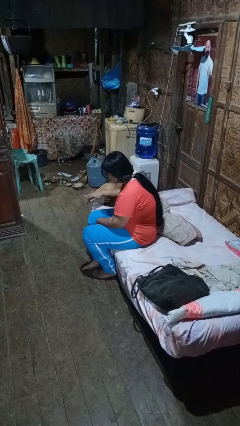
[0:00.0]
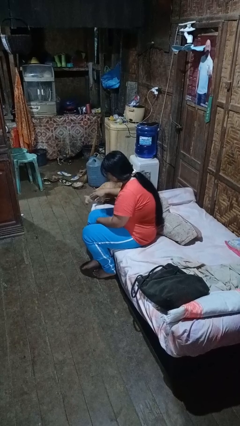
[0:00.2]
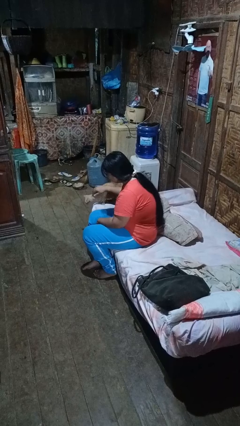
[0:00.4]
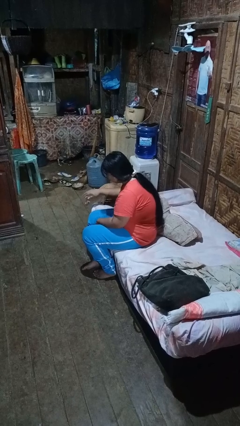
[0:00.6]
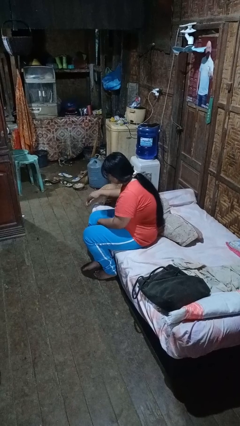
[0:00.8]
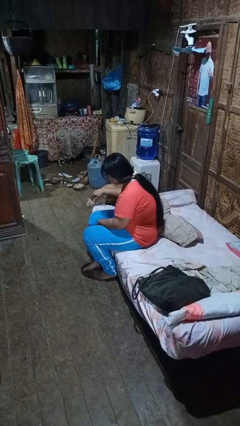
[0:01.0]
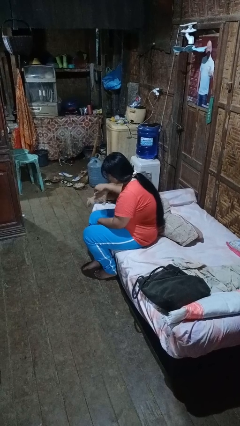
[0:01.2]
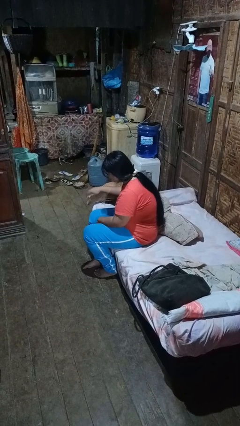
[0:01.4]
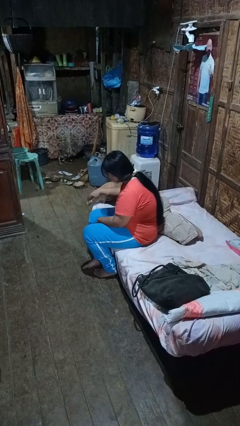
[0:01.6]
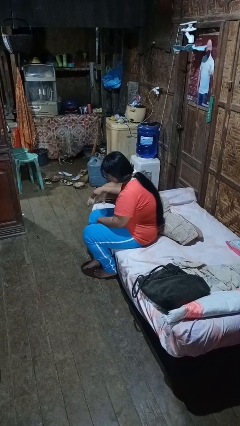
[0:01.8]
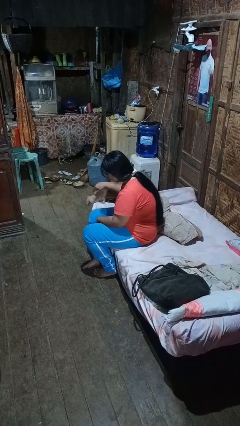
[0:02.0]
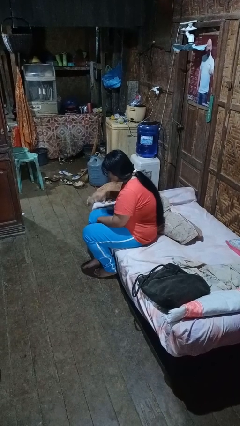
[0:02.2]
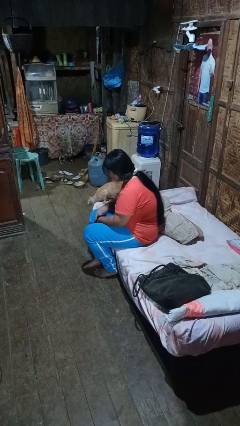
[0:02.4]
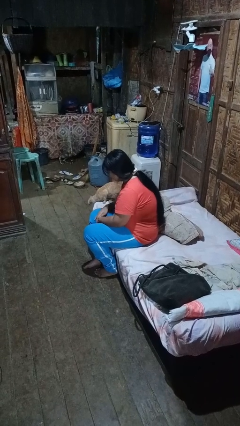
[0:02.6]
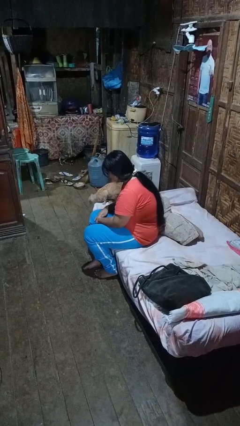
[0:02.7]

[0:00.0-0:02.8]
person pets cat

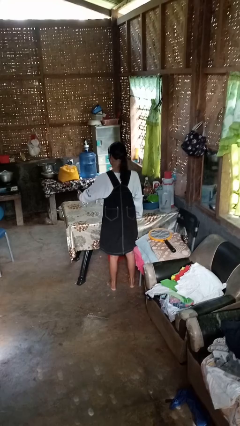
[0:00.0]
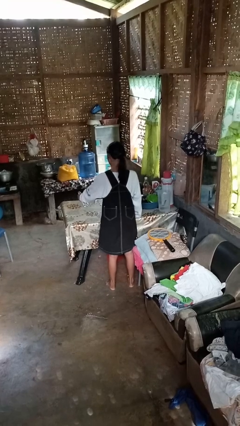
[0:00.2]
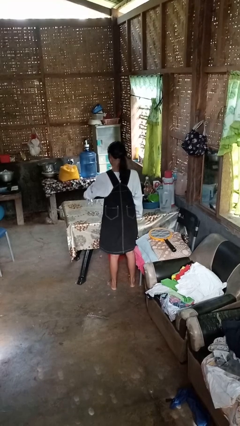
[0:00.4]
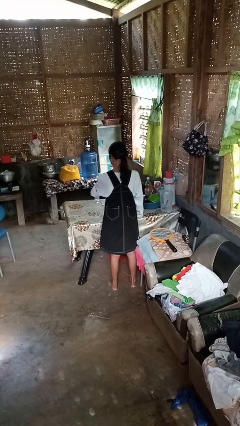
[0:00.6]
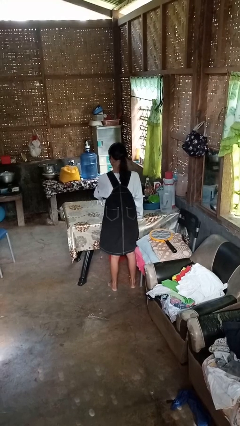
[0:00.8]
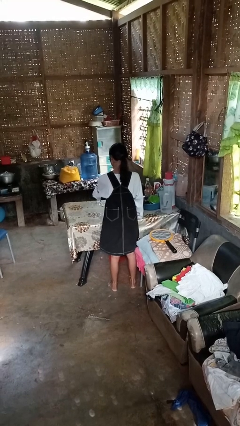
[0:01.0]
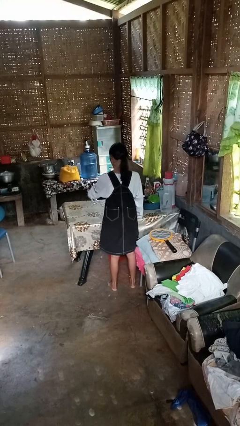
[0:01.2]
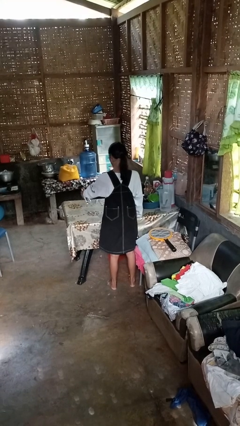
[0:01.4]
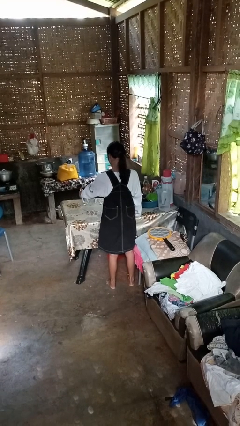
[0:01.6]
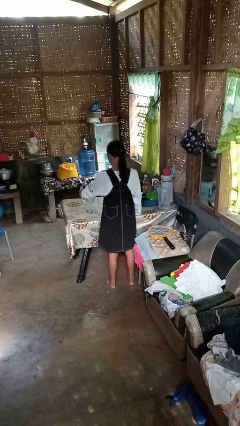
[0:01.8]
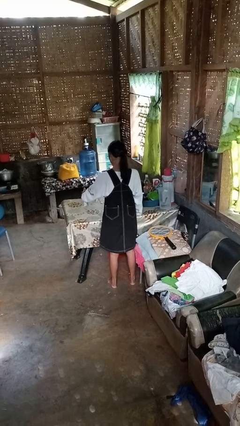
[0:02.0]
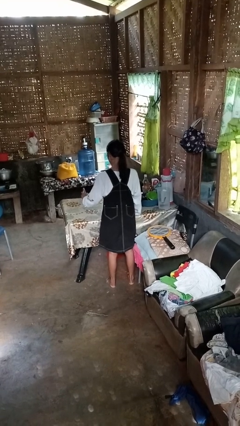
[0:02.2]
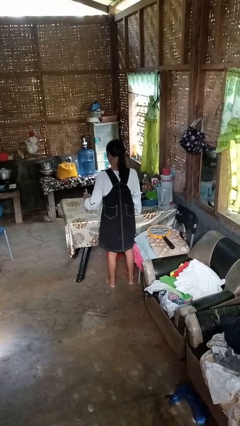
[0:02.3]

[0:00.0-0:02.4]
person sprays from bottle

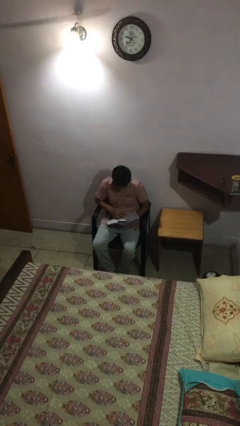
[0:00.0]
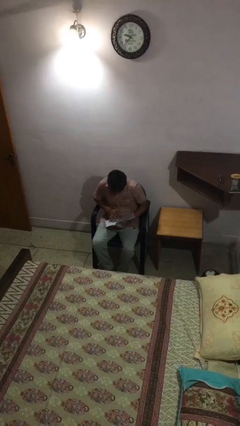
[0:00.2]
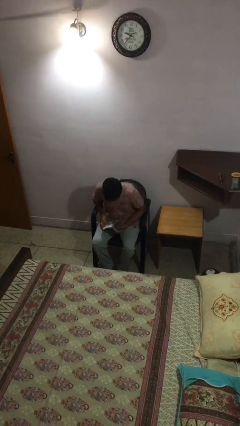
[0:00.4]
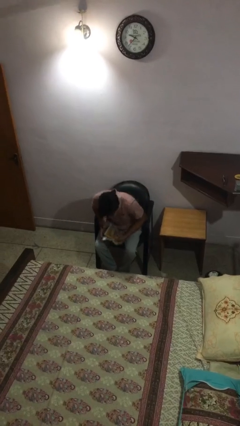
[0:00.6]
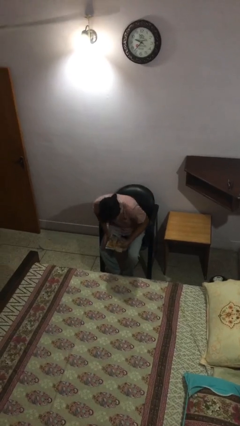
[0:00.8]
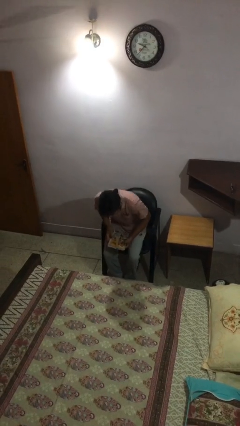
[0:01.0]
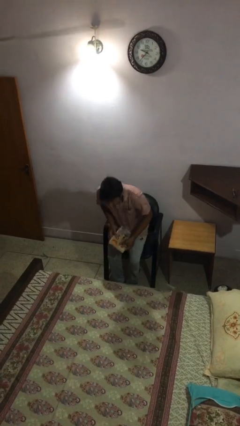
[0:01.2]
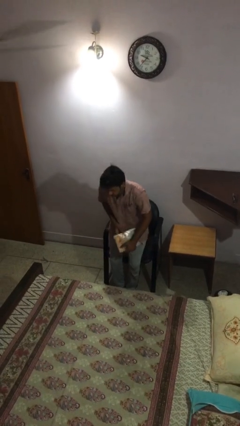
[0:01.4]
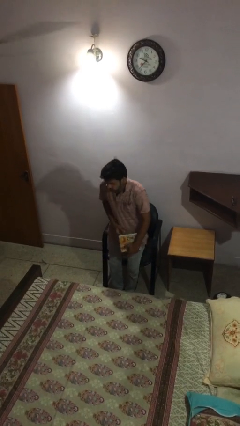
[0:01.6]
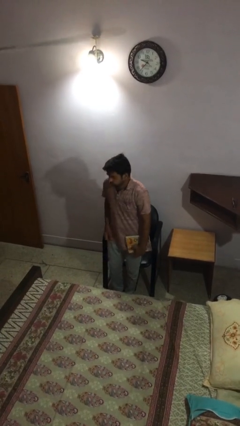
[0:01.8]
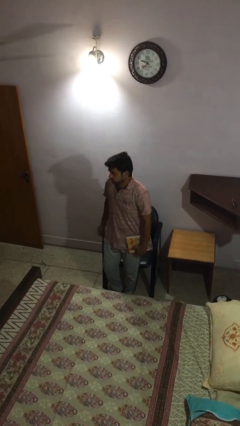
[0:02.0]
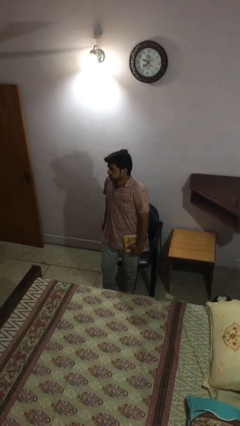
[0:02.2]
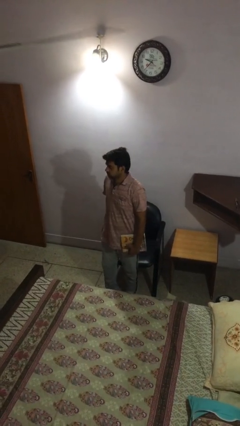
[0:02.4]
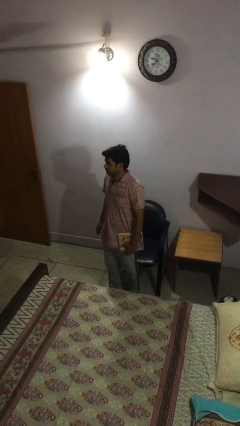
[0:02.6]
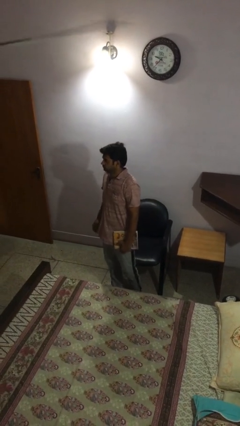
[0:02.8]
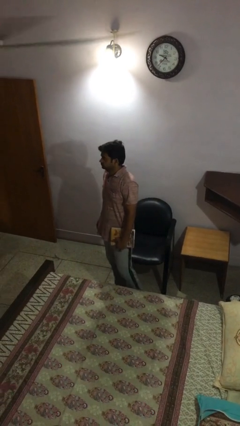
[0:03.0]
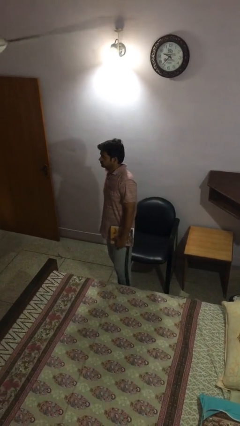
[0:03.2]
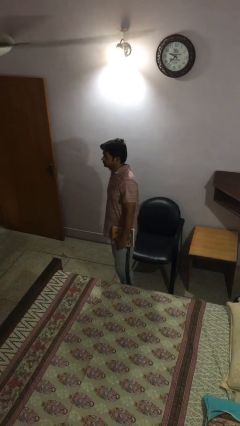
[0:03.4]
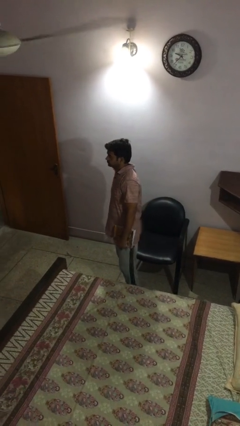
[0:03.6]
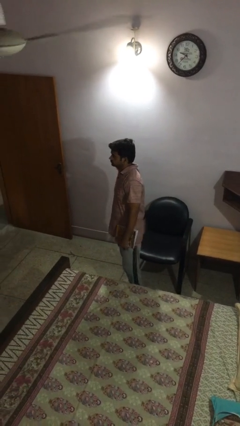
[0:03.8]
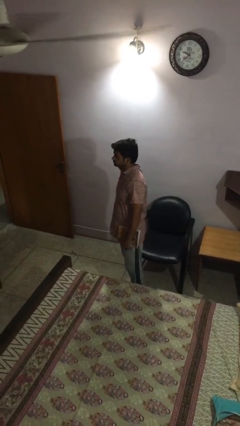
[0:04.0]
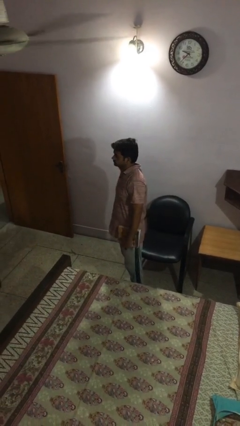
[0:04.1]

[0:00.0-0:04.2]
person stands up

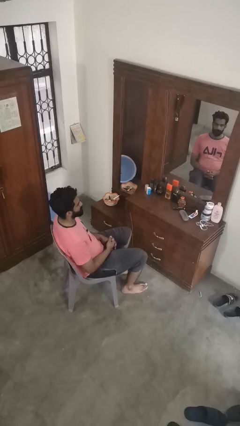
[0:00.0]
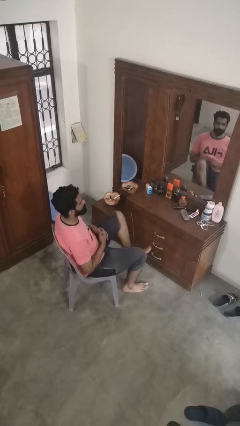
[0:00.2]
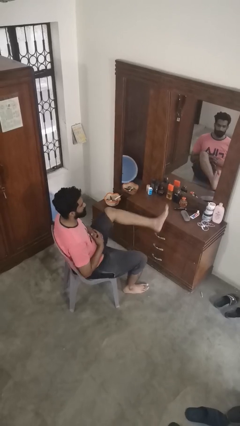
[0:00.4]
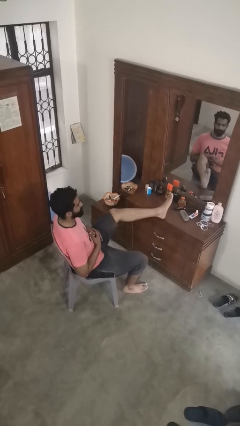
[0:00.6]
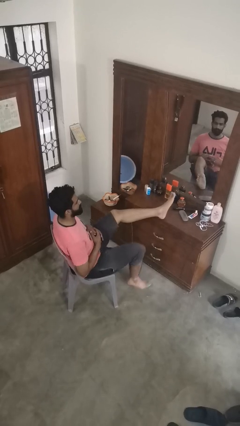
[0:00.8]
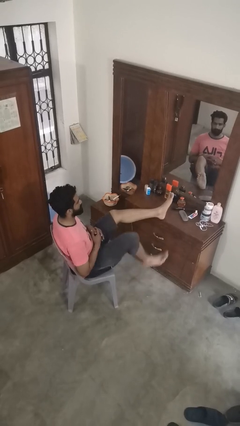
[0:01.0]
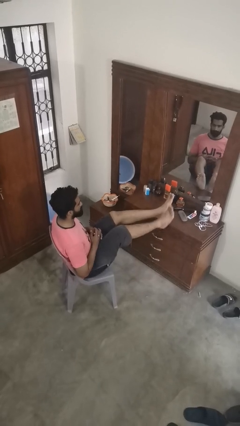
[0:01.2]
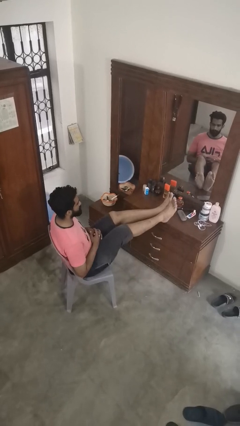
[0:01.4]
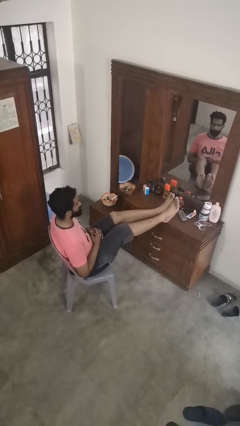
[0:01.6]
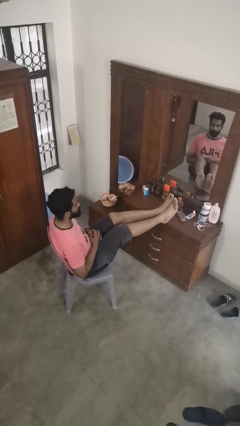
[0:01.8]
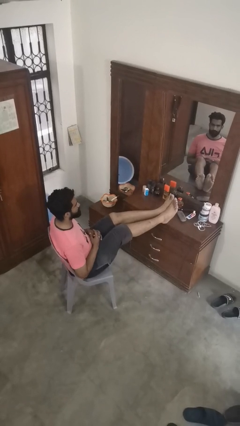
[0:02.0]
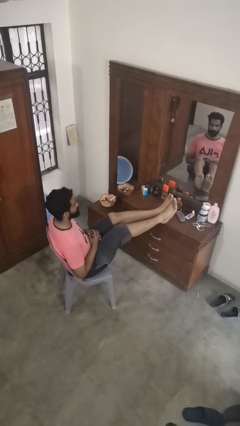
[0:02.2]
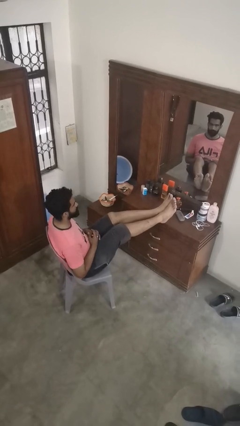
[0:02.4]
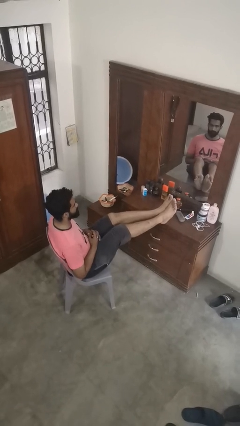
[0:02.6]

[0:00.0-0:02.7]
person puts feet up

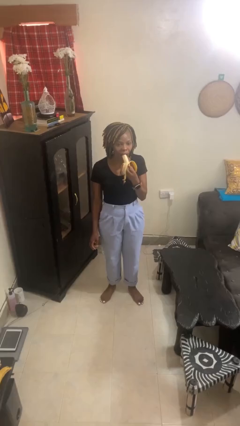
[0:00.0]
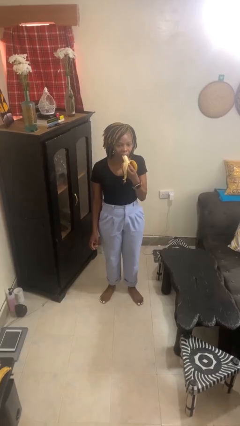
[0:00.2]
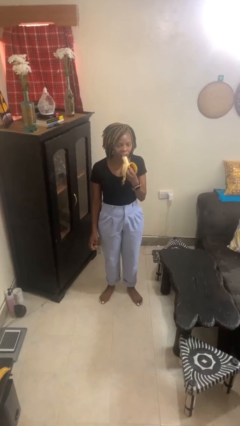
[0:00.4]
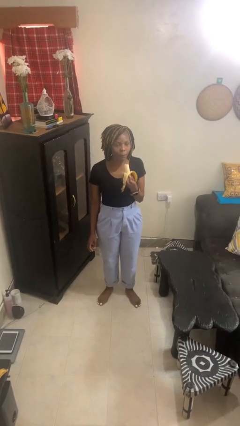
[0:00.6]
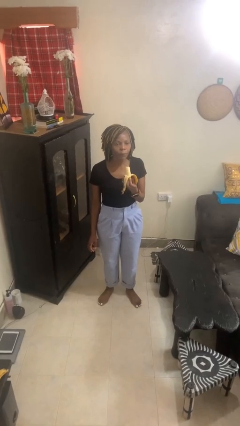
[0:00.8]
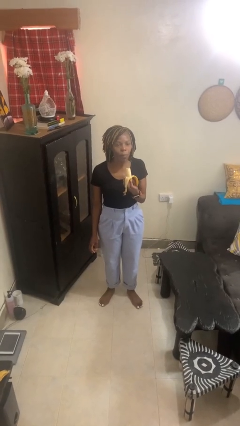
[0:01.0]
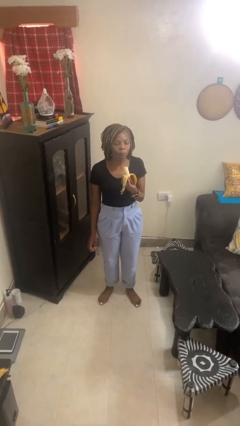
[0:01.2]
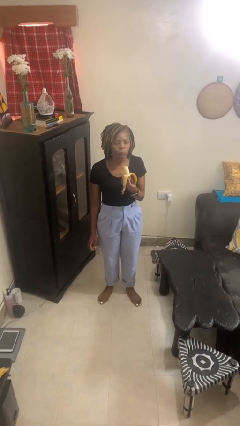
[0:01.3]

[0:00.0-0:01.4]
person eats banana

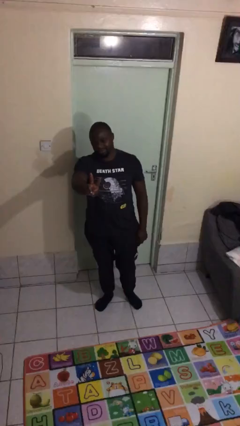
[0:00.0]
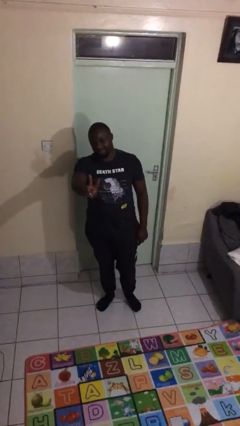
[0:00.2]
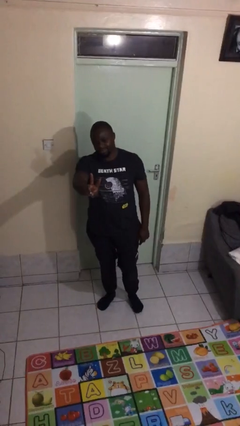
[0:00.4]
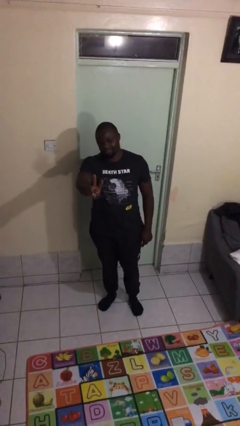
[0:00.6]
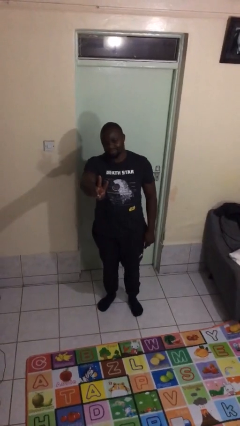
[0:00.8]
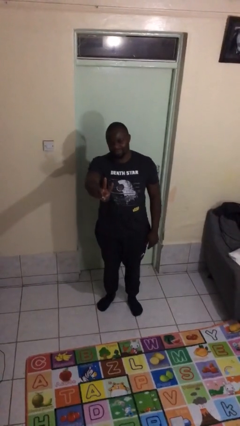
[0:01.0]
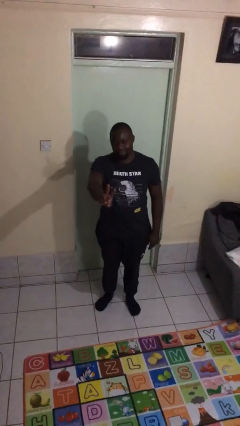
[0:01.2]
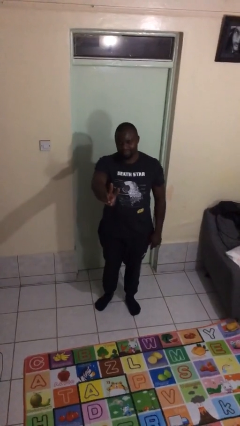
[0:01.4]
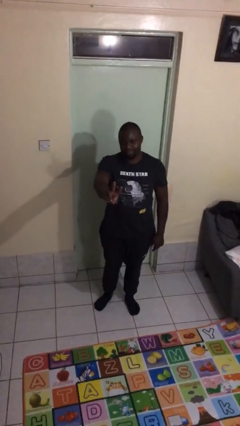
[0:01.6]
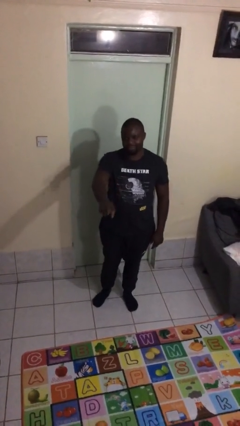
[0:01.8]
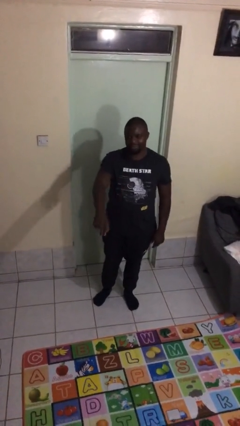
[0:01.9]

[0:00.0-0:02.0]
person gestures peace

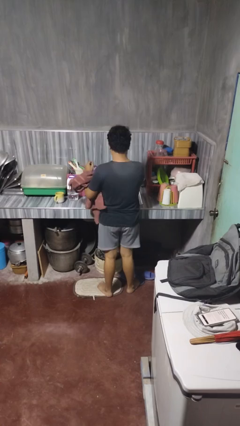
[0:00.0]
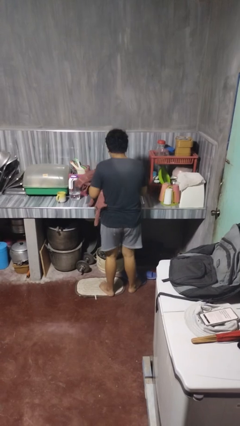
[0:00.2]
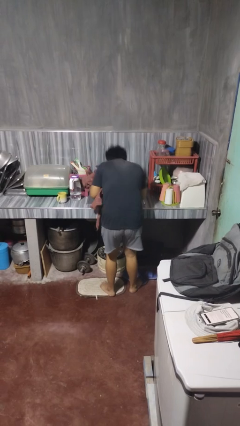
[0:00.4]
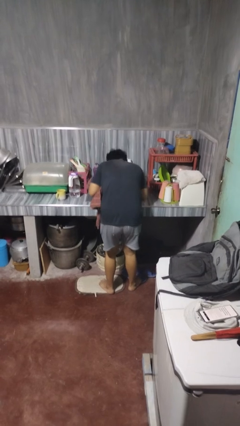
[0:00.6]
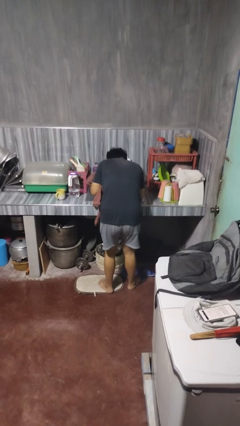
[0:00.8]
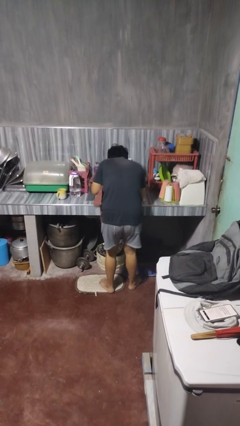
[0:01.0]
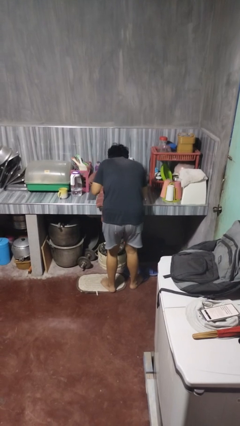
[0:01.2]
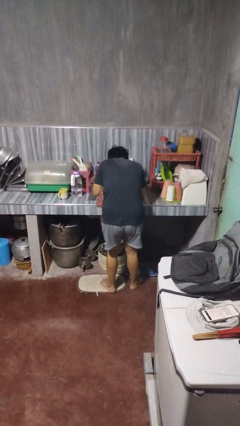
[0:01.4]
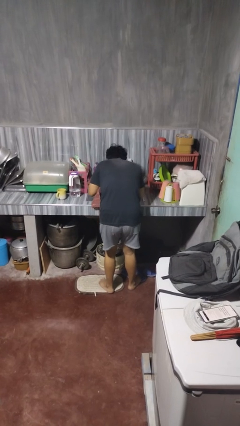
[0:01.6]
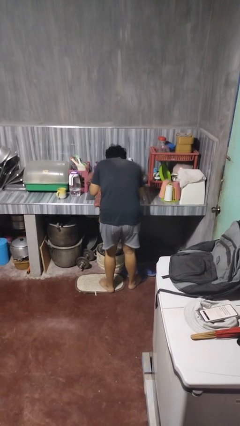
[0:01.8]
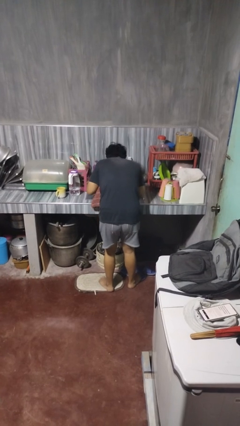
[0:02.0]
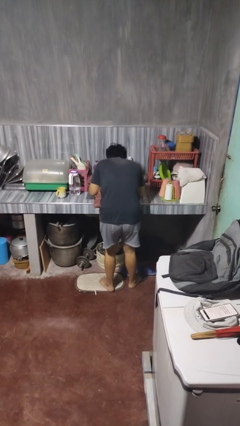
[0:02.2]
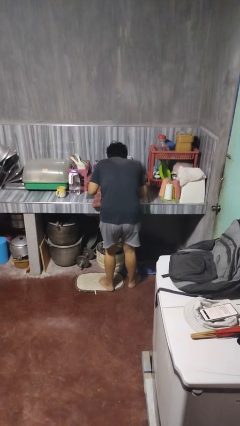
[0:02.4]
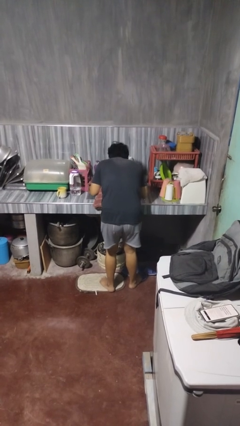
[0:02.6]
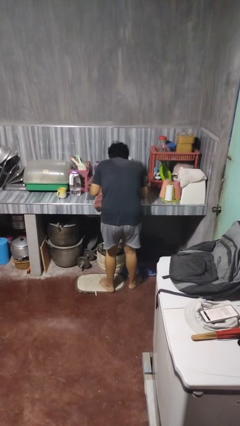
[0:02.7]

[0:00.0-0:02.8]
person washes face
